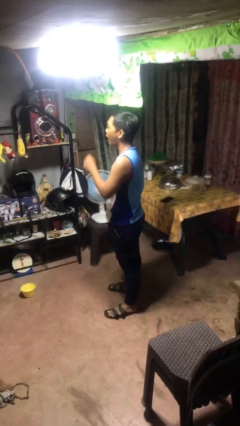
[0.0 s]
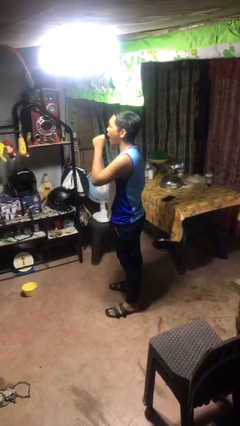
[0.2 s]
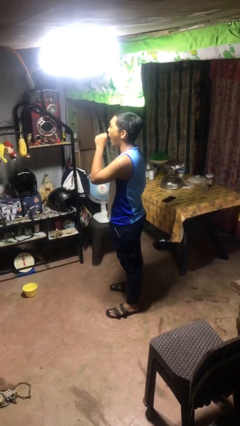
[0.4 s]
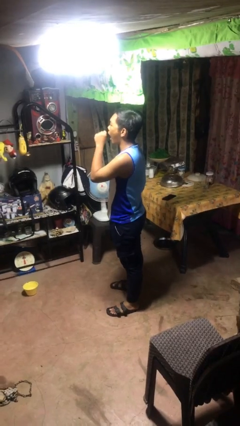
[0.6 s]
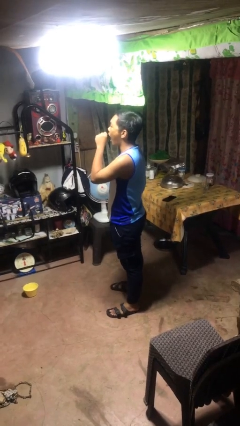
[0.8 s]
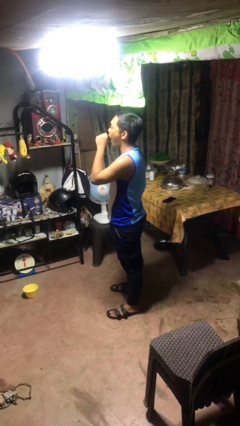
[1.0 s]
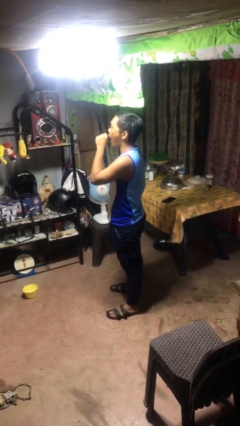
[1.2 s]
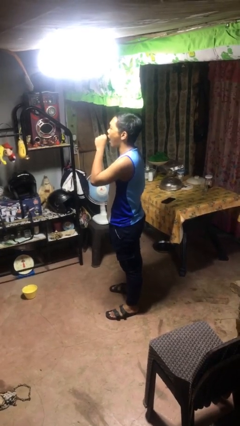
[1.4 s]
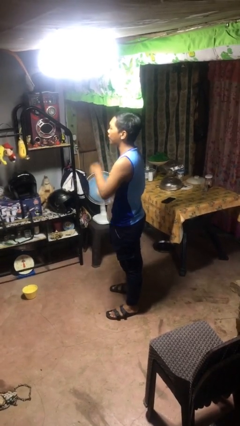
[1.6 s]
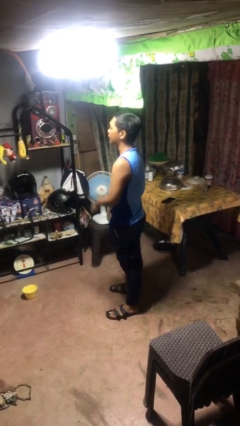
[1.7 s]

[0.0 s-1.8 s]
person yawns

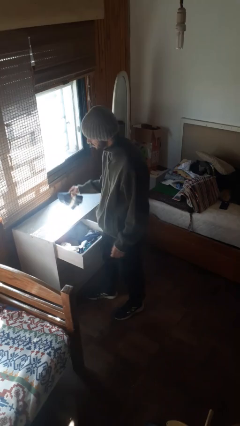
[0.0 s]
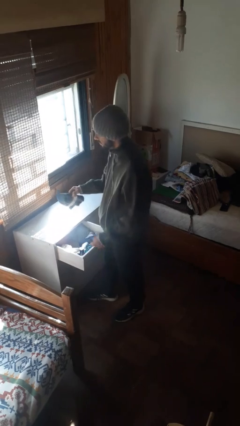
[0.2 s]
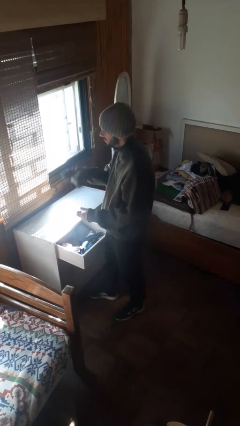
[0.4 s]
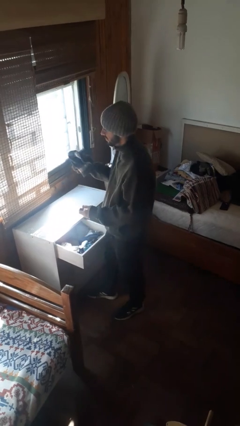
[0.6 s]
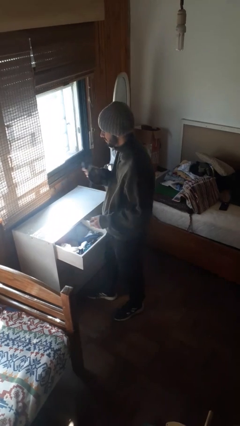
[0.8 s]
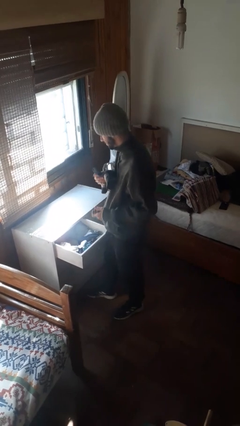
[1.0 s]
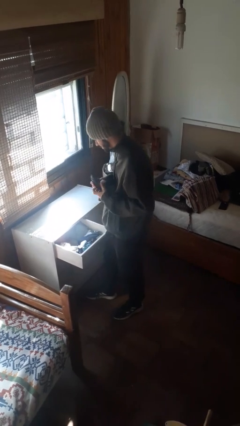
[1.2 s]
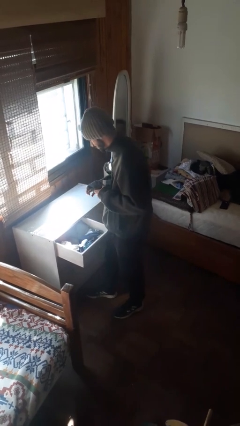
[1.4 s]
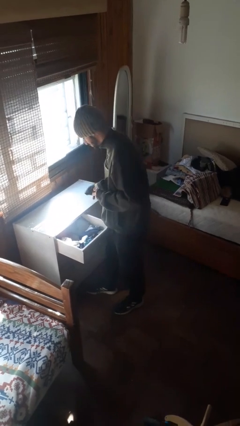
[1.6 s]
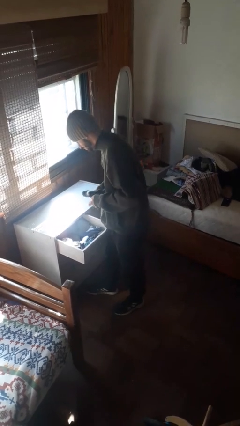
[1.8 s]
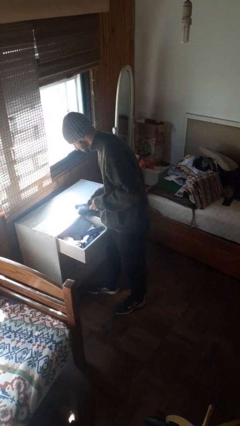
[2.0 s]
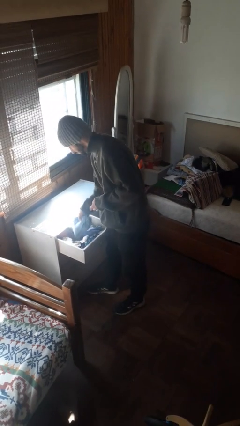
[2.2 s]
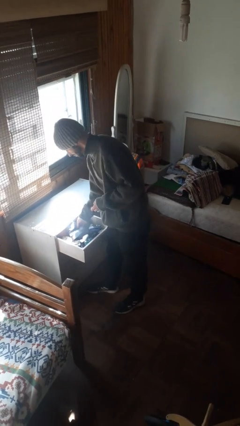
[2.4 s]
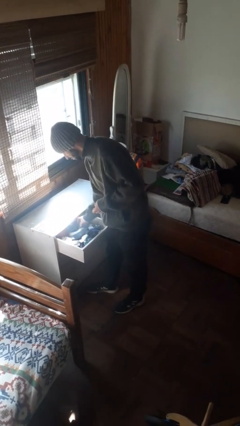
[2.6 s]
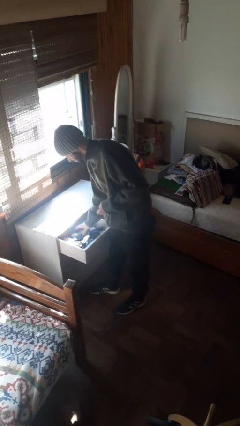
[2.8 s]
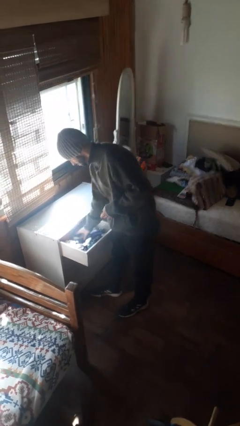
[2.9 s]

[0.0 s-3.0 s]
person puts clothes into dresser

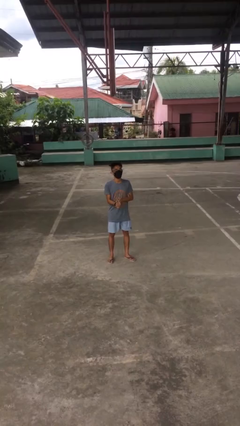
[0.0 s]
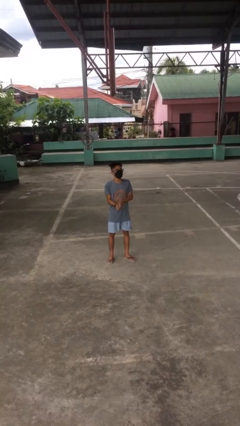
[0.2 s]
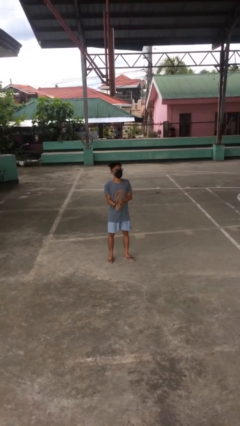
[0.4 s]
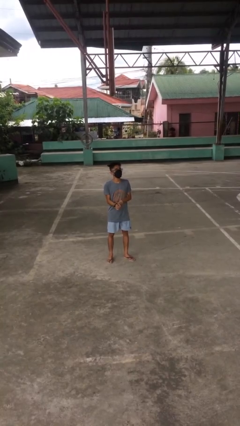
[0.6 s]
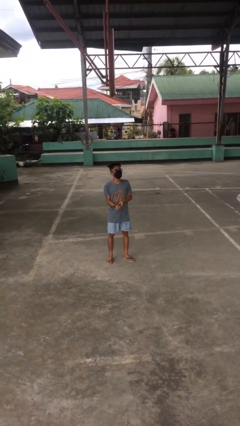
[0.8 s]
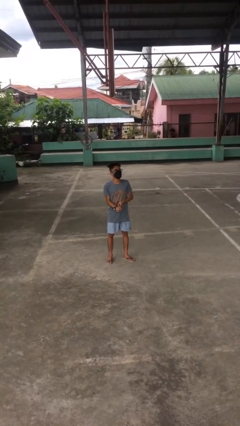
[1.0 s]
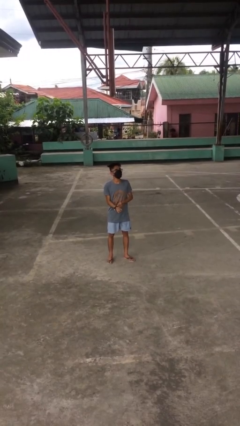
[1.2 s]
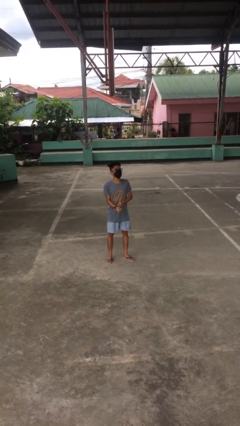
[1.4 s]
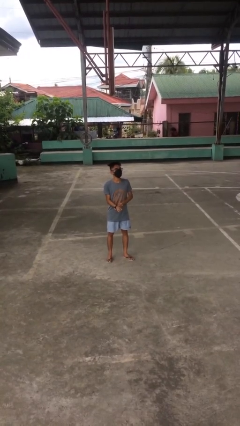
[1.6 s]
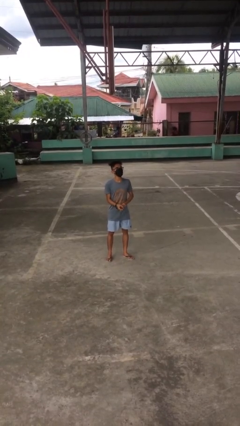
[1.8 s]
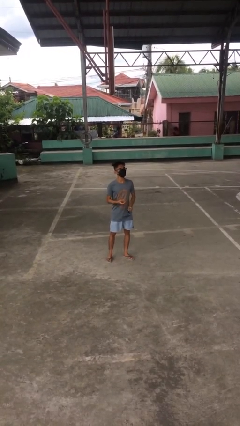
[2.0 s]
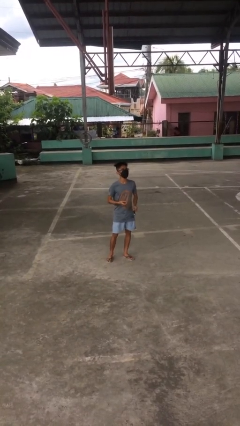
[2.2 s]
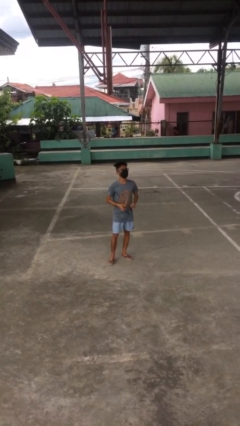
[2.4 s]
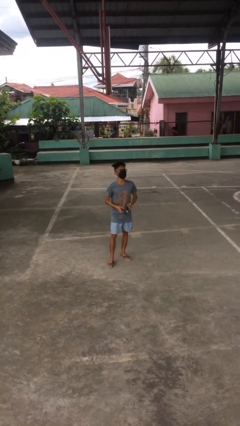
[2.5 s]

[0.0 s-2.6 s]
person takes off wristwatch

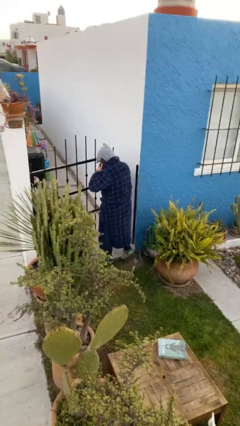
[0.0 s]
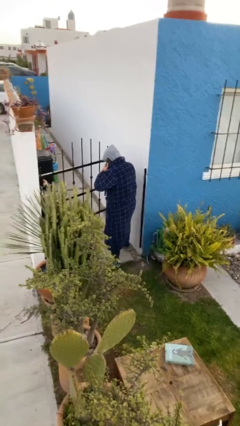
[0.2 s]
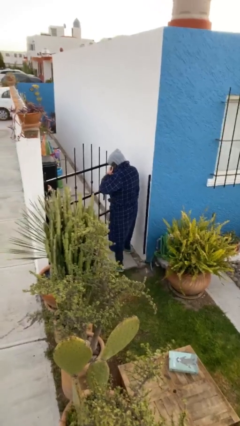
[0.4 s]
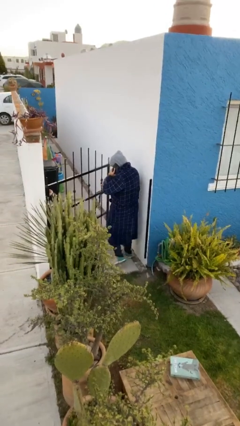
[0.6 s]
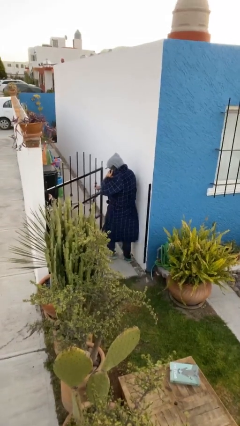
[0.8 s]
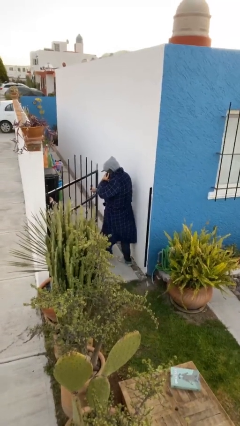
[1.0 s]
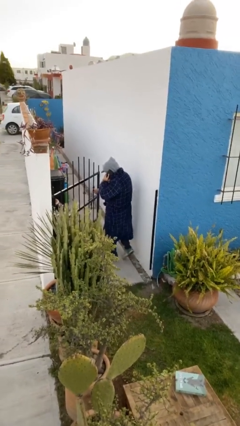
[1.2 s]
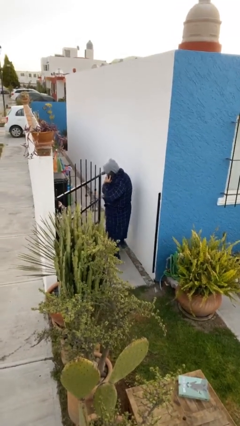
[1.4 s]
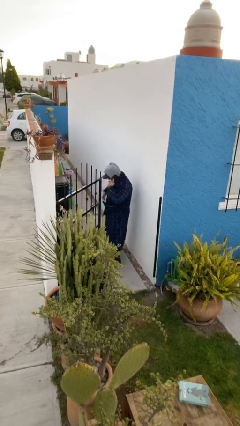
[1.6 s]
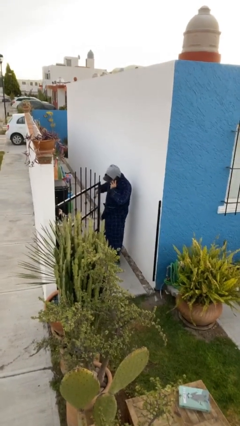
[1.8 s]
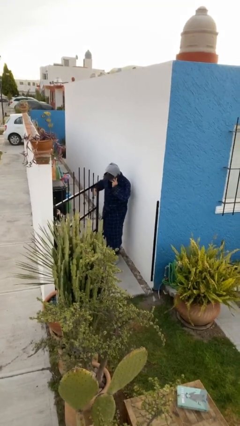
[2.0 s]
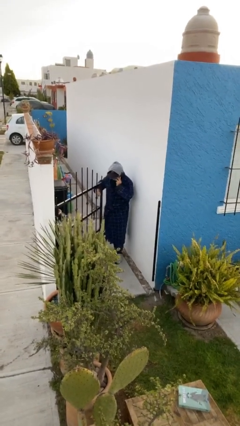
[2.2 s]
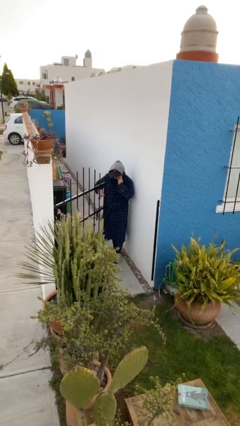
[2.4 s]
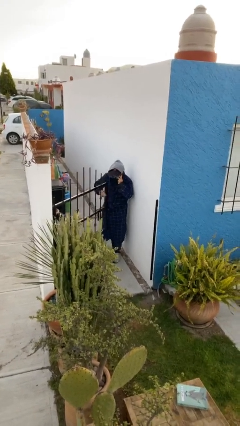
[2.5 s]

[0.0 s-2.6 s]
person exits scene through structure

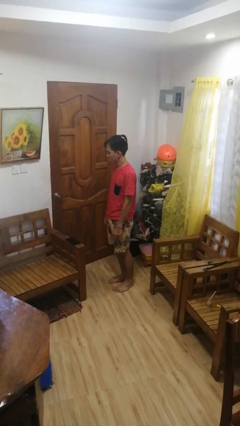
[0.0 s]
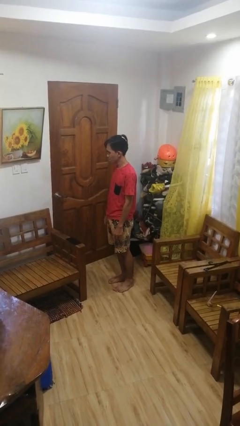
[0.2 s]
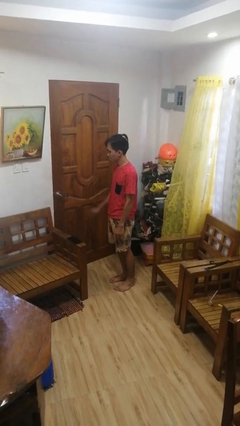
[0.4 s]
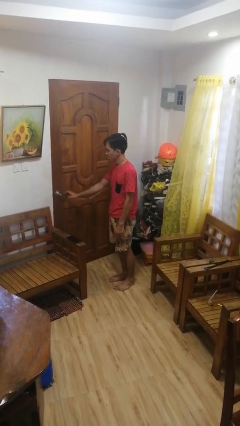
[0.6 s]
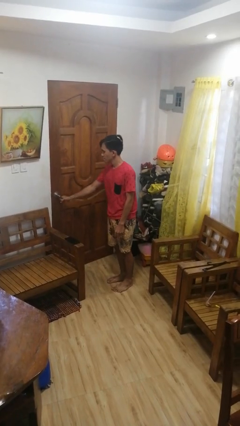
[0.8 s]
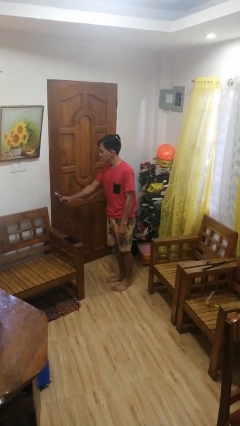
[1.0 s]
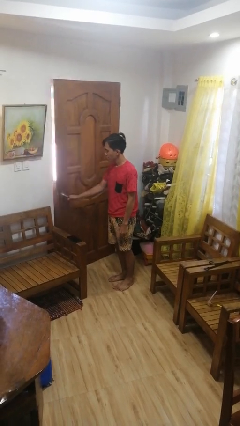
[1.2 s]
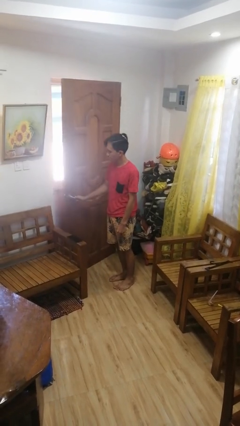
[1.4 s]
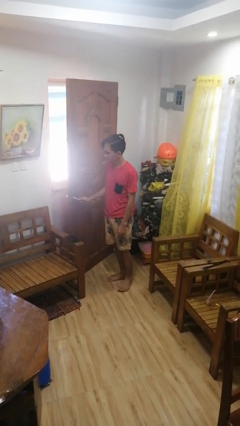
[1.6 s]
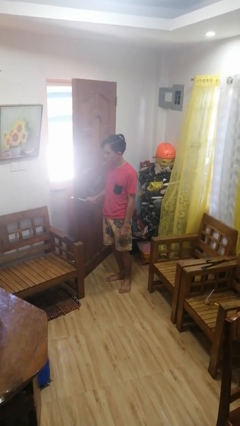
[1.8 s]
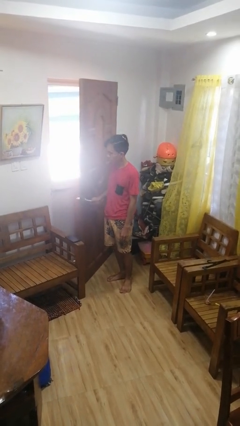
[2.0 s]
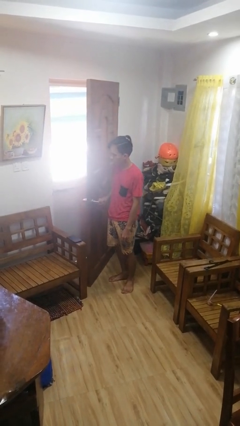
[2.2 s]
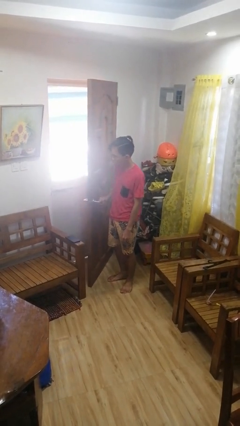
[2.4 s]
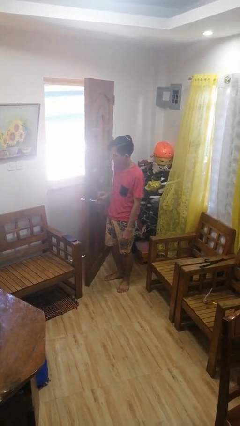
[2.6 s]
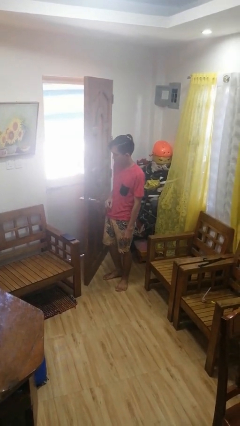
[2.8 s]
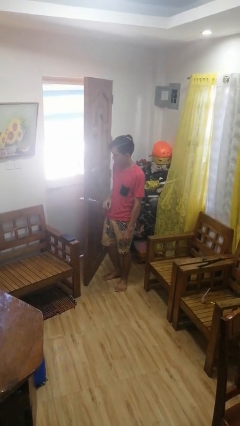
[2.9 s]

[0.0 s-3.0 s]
person opens facility door

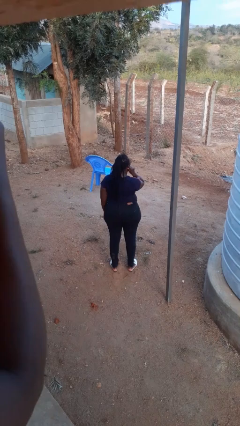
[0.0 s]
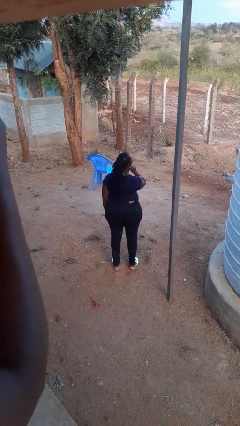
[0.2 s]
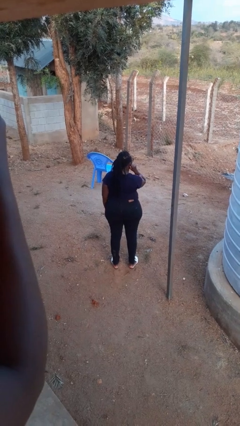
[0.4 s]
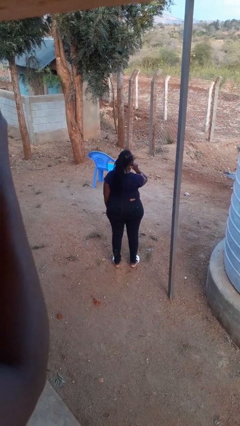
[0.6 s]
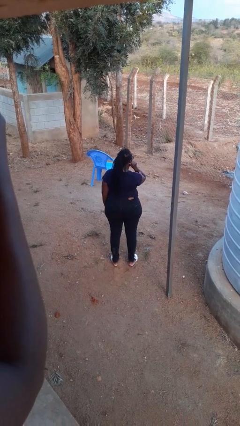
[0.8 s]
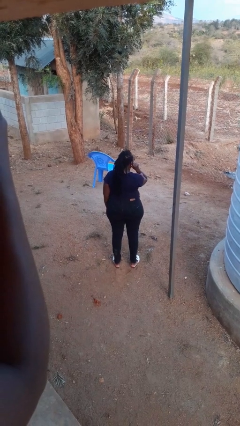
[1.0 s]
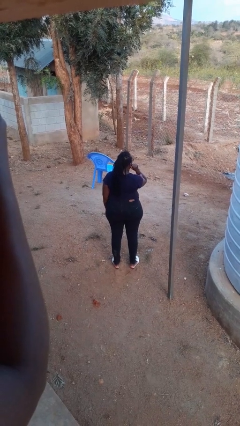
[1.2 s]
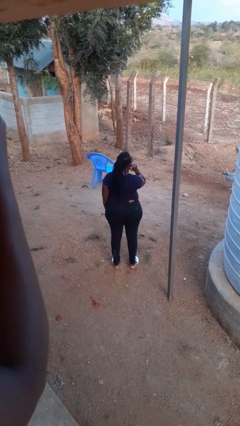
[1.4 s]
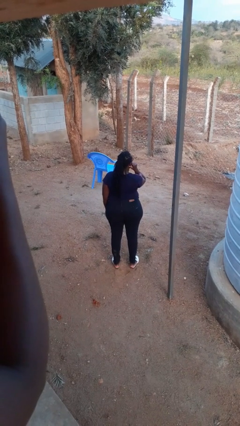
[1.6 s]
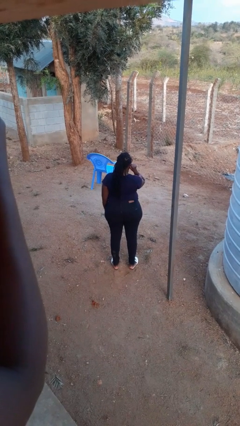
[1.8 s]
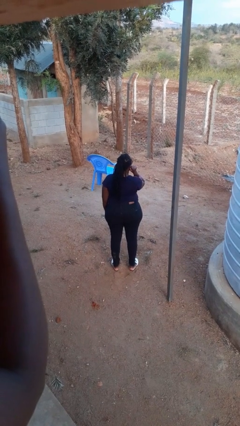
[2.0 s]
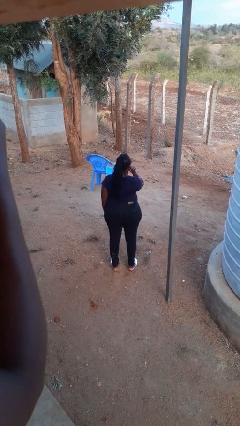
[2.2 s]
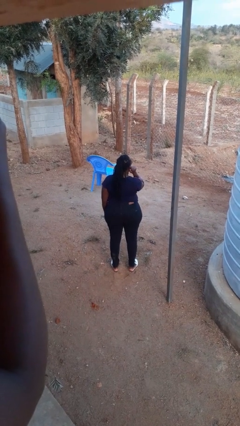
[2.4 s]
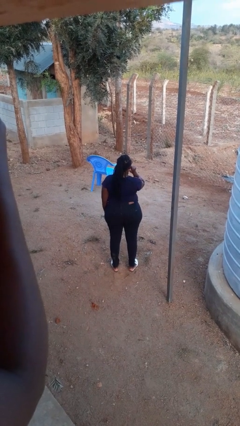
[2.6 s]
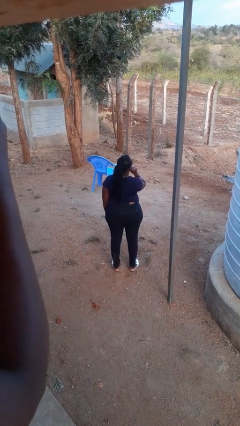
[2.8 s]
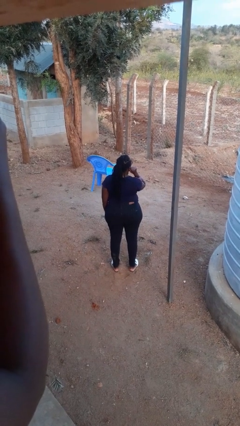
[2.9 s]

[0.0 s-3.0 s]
person touches earlobe

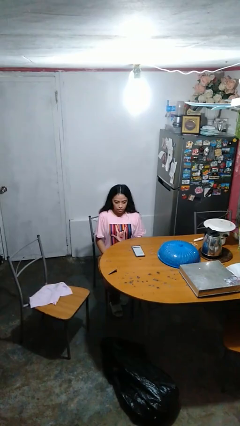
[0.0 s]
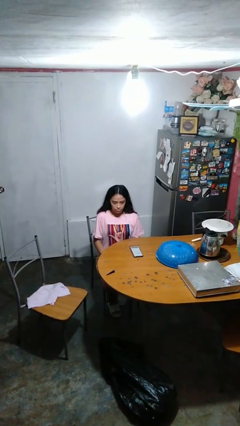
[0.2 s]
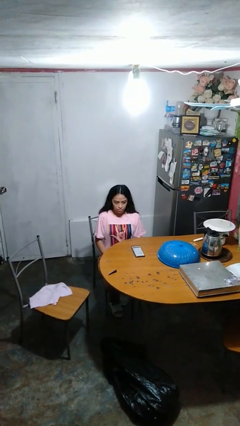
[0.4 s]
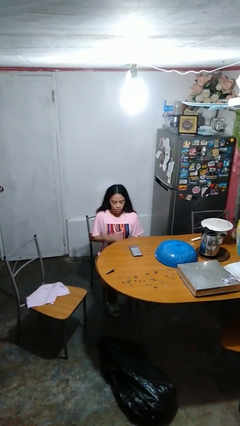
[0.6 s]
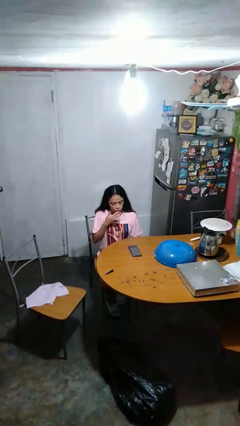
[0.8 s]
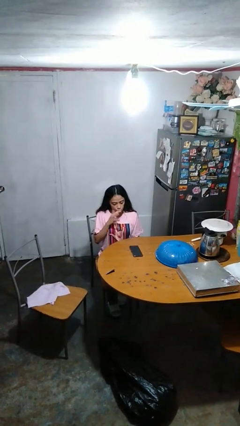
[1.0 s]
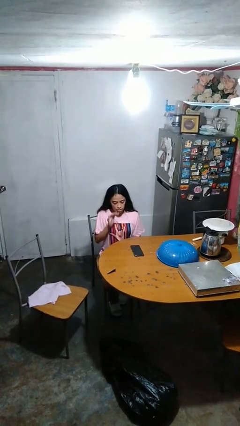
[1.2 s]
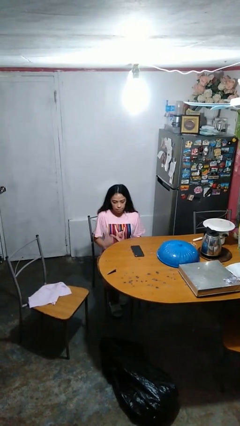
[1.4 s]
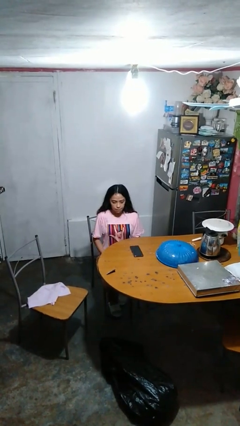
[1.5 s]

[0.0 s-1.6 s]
person licks fingers
